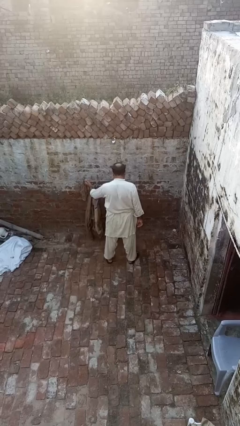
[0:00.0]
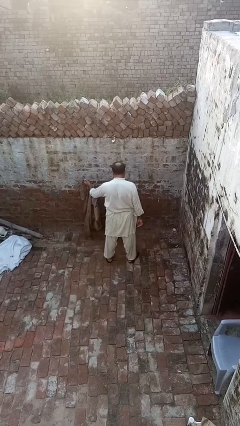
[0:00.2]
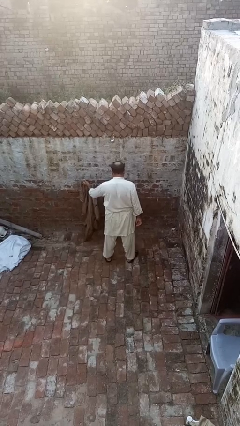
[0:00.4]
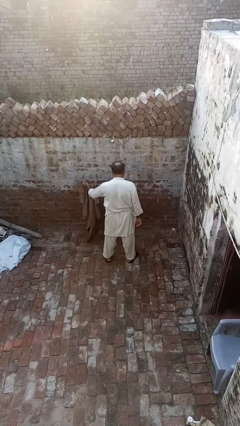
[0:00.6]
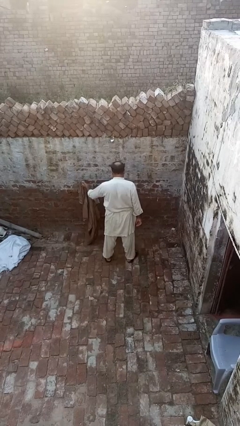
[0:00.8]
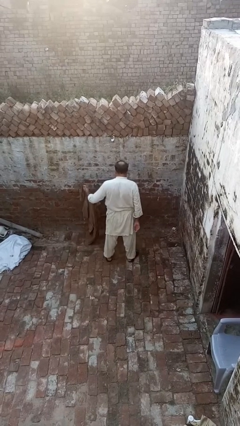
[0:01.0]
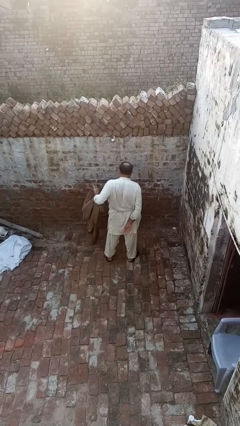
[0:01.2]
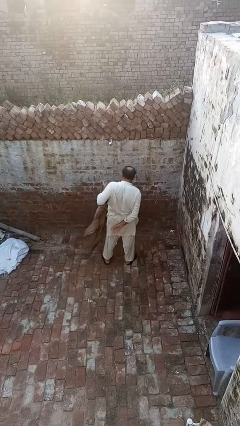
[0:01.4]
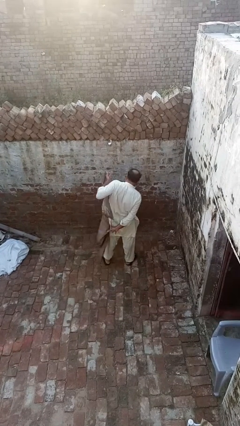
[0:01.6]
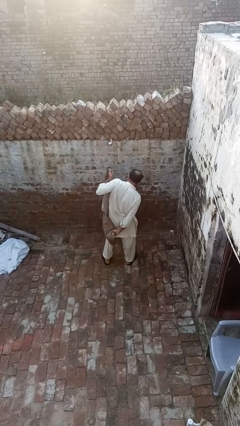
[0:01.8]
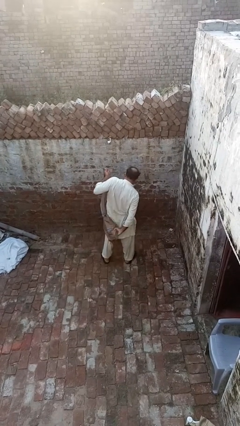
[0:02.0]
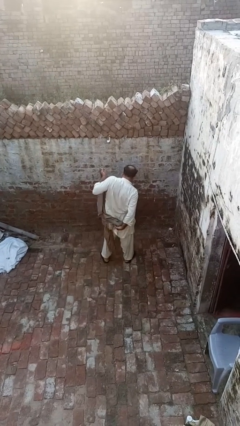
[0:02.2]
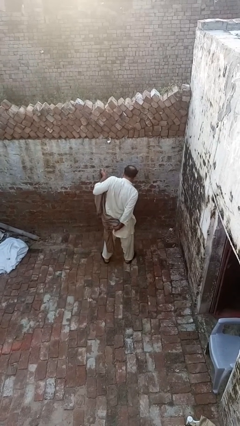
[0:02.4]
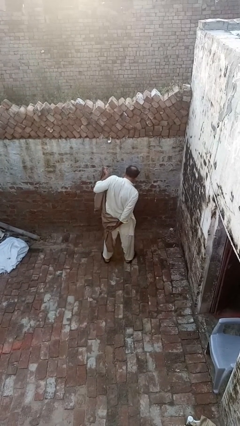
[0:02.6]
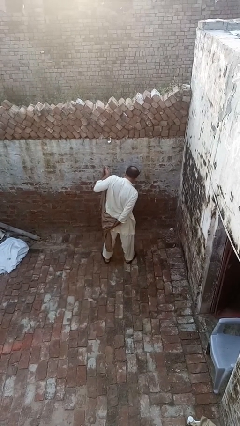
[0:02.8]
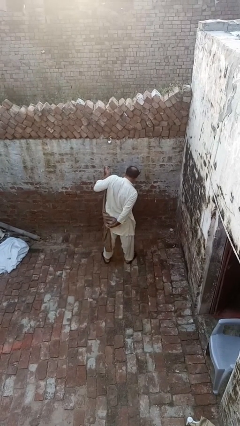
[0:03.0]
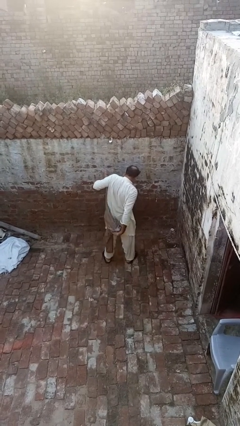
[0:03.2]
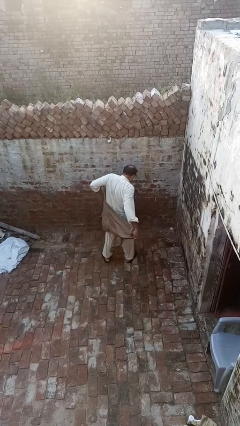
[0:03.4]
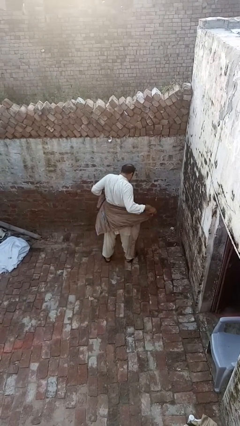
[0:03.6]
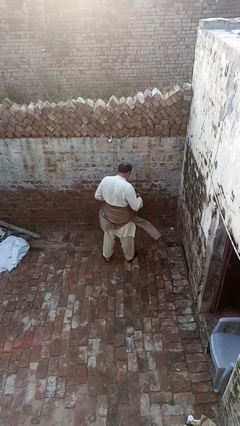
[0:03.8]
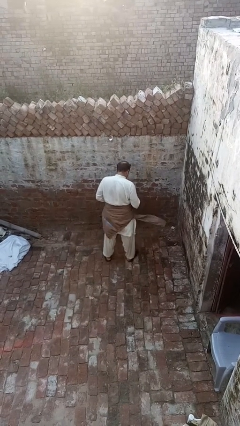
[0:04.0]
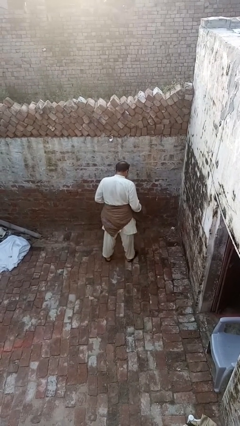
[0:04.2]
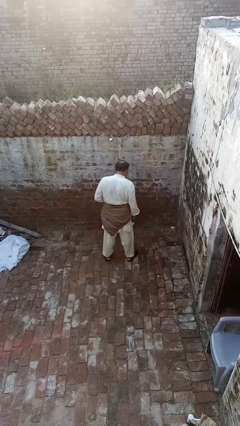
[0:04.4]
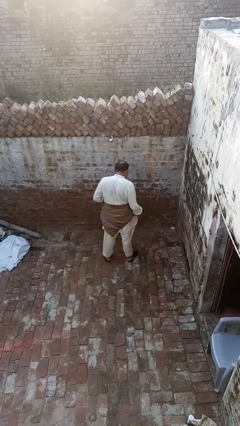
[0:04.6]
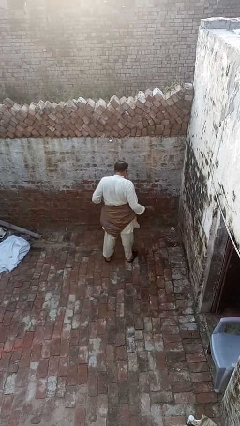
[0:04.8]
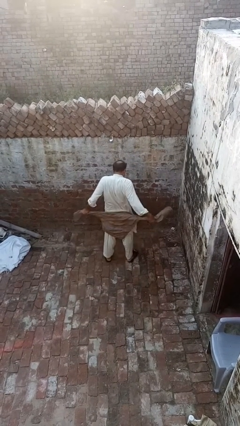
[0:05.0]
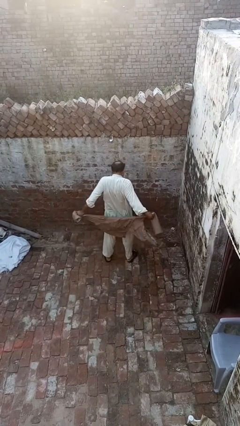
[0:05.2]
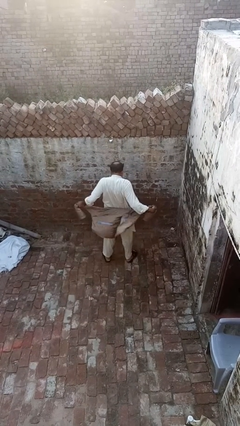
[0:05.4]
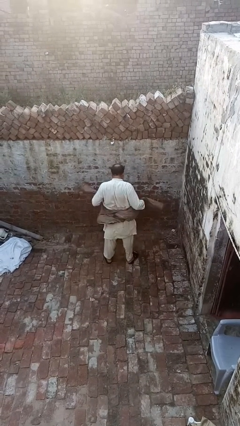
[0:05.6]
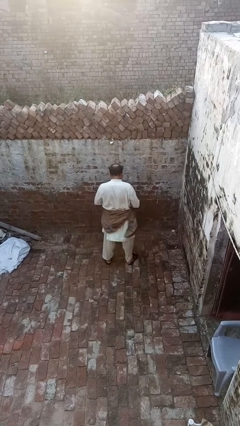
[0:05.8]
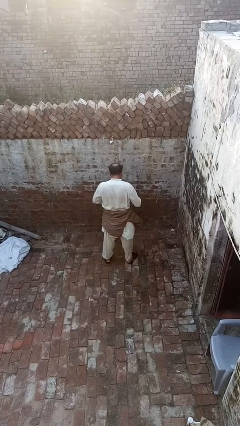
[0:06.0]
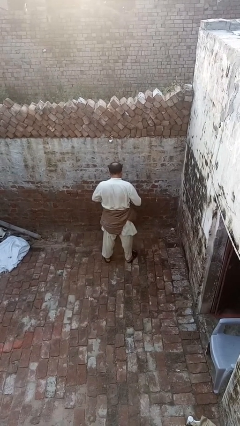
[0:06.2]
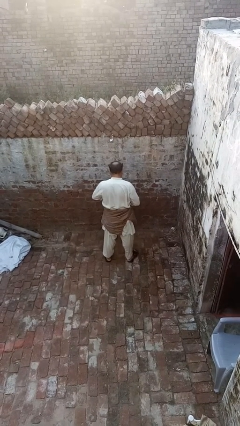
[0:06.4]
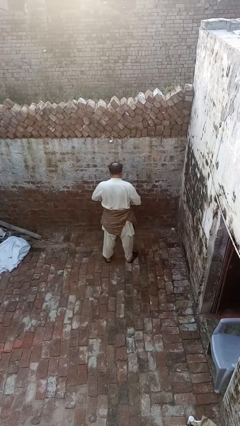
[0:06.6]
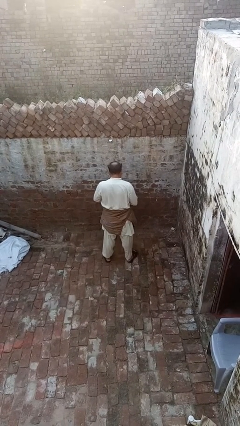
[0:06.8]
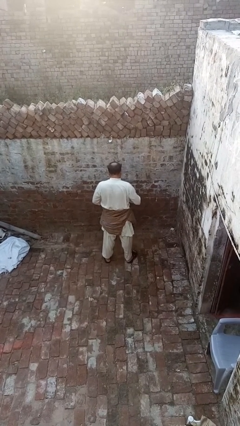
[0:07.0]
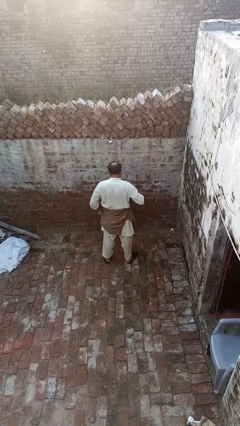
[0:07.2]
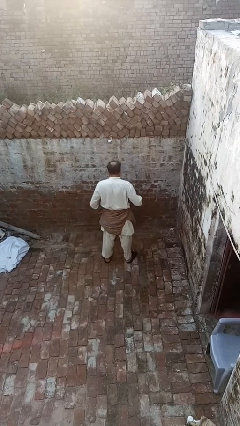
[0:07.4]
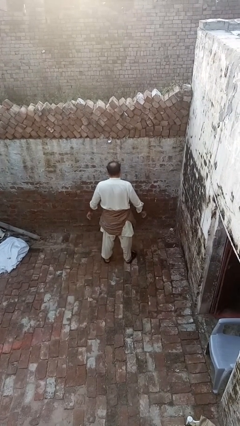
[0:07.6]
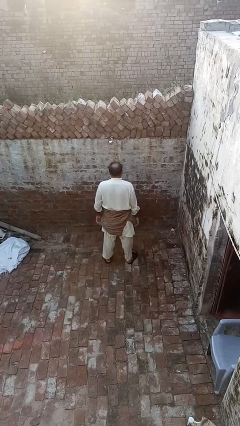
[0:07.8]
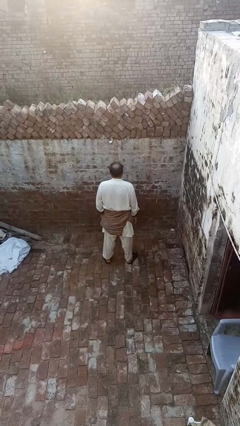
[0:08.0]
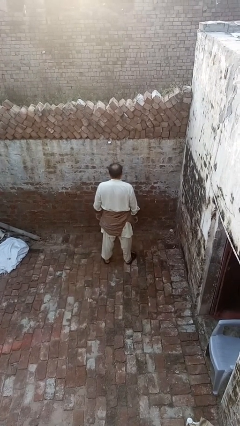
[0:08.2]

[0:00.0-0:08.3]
person ties jacket around waist

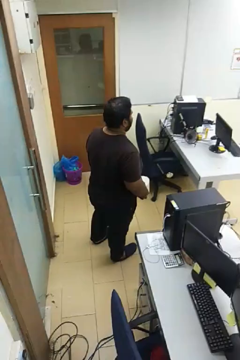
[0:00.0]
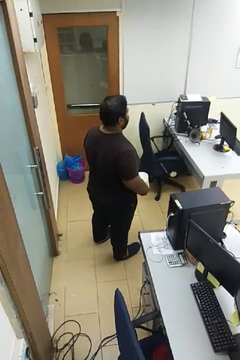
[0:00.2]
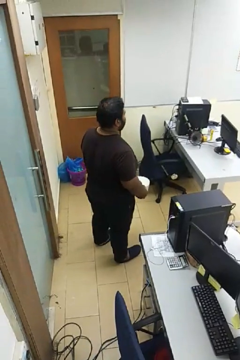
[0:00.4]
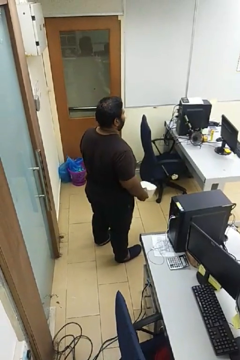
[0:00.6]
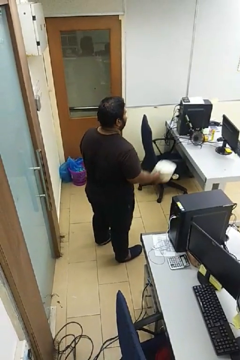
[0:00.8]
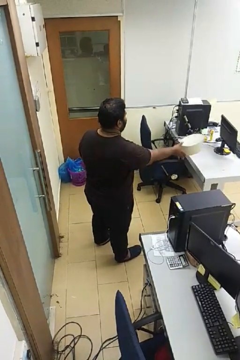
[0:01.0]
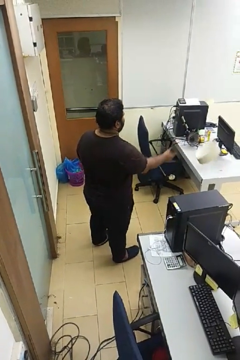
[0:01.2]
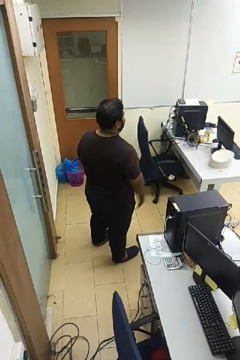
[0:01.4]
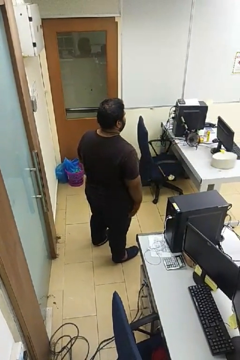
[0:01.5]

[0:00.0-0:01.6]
person throws object on table

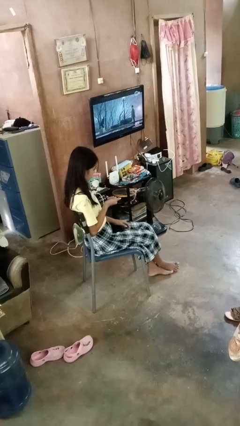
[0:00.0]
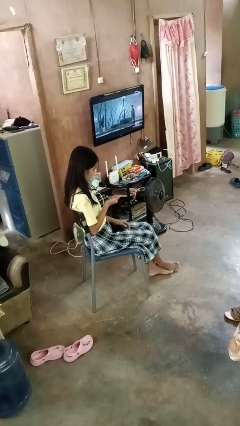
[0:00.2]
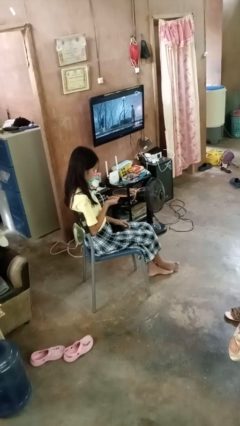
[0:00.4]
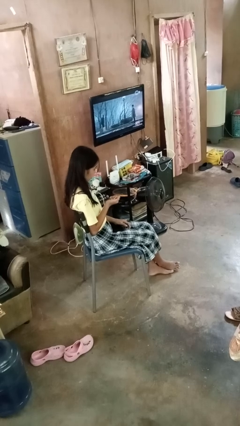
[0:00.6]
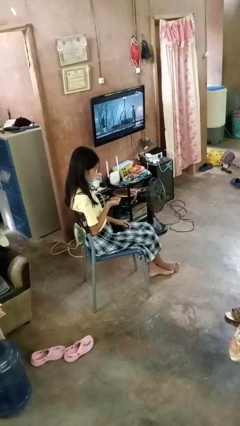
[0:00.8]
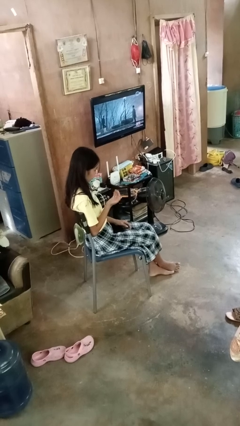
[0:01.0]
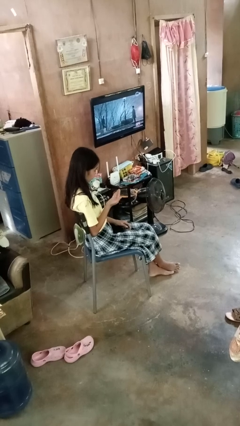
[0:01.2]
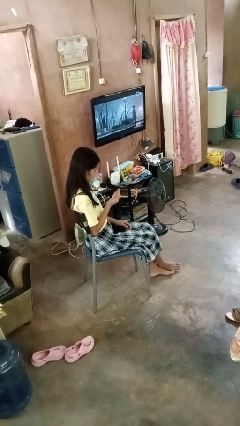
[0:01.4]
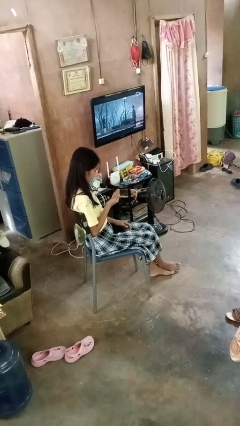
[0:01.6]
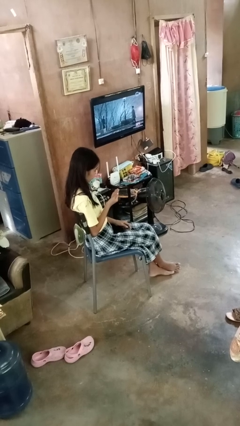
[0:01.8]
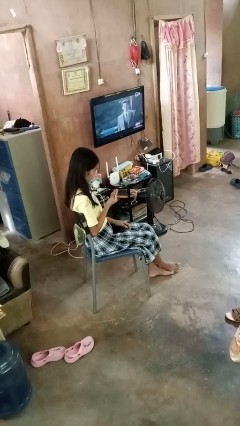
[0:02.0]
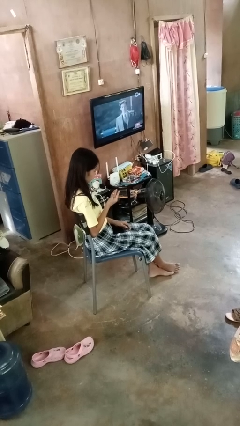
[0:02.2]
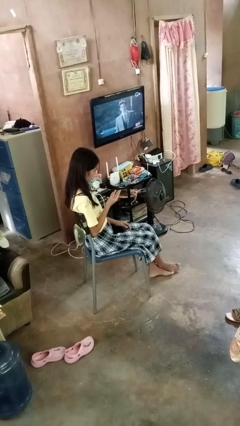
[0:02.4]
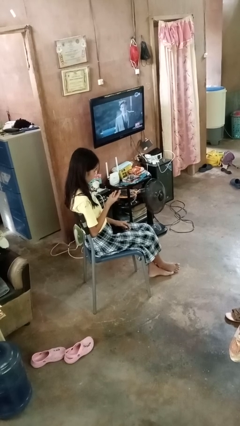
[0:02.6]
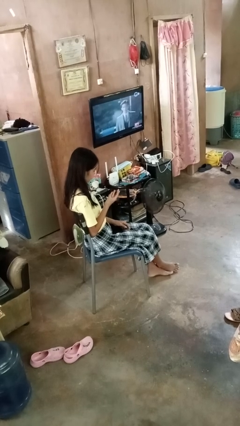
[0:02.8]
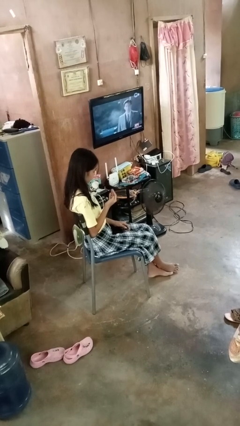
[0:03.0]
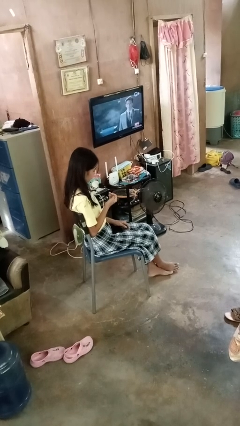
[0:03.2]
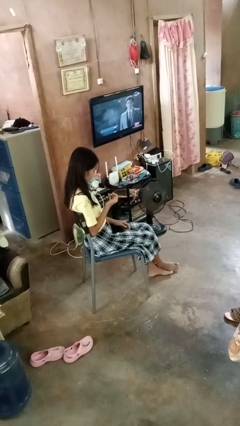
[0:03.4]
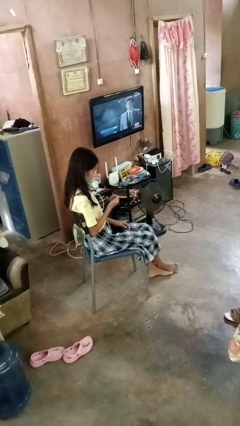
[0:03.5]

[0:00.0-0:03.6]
person looks at hands in lap

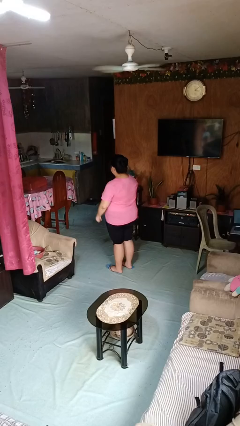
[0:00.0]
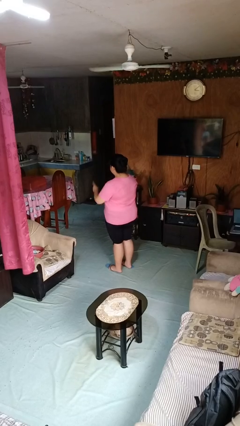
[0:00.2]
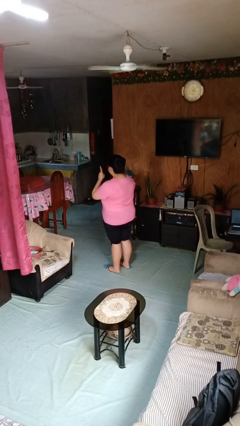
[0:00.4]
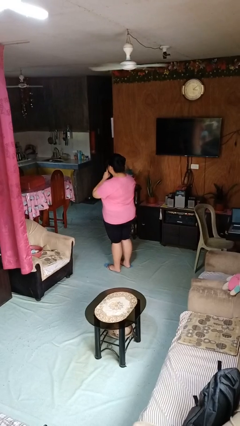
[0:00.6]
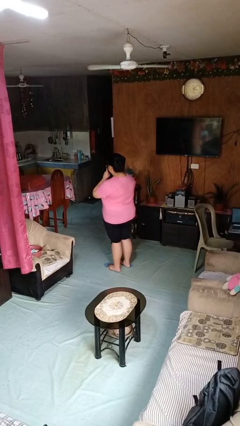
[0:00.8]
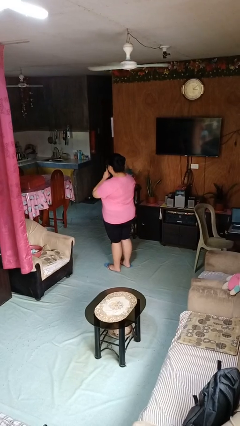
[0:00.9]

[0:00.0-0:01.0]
person gestures blow kiss

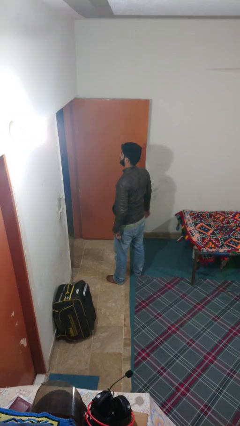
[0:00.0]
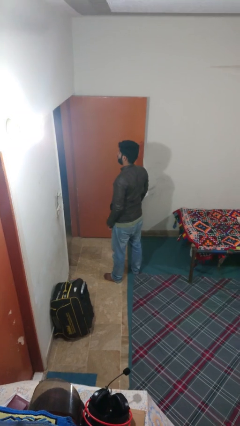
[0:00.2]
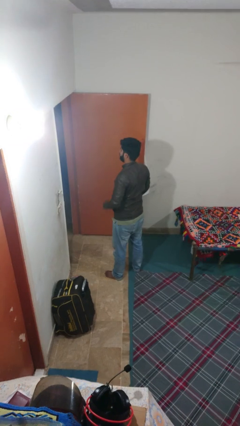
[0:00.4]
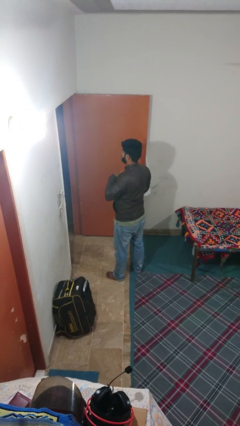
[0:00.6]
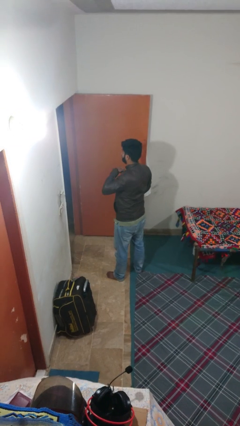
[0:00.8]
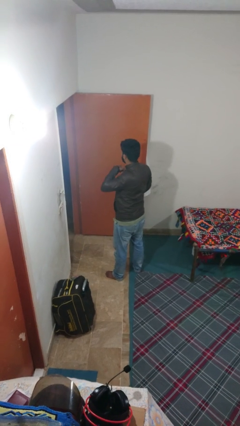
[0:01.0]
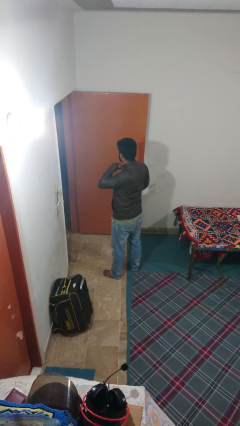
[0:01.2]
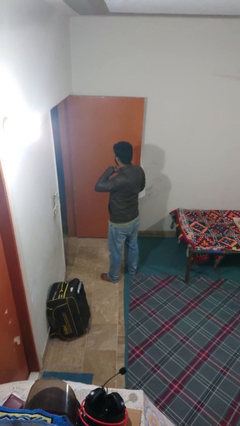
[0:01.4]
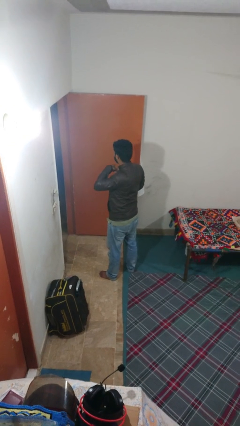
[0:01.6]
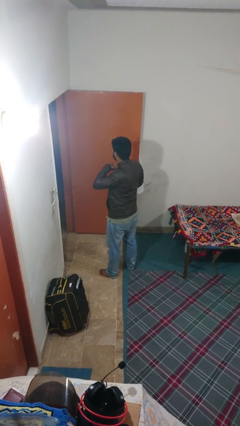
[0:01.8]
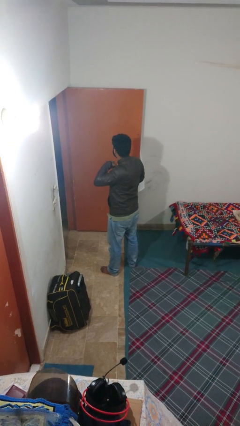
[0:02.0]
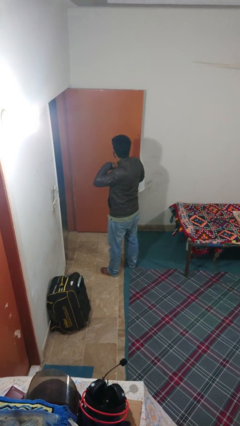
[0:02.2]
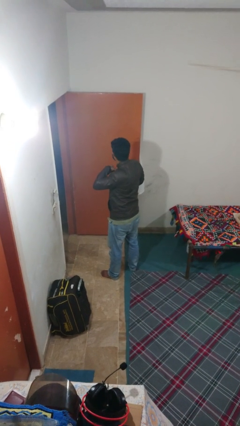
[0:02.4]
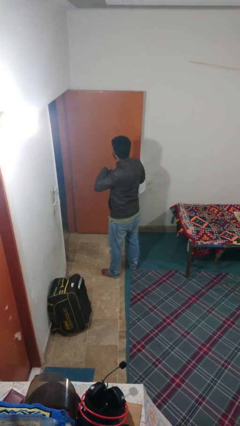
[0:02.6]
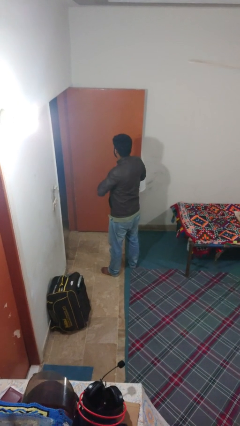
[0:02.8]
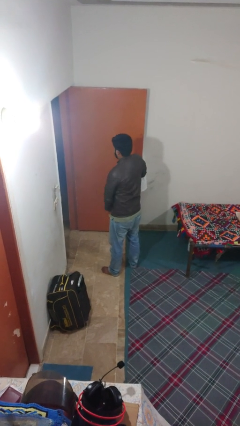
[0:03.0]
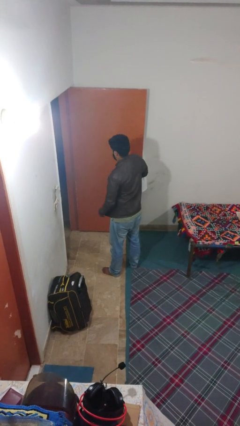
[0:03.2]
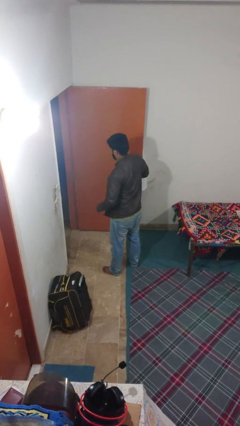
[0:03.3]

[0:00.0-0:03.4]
person unzips jacket
